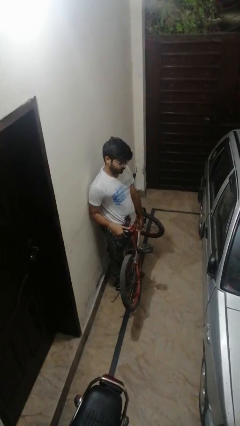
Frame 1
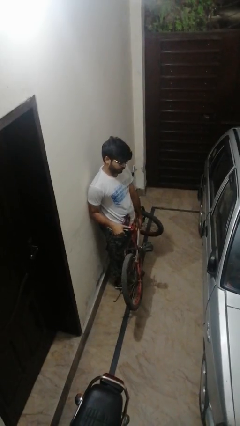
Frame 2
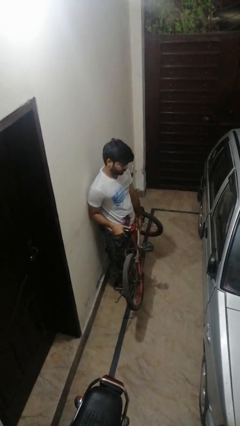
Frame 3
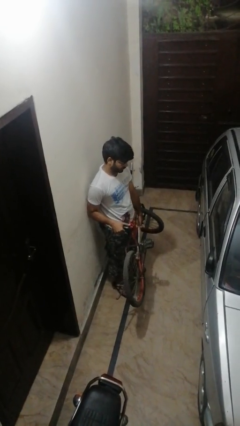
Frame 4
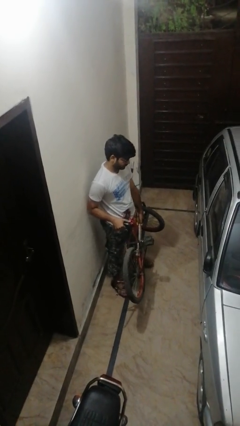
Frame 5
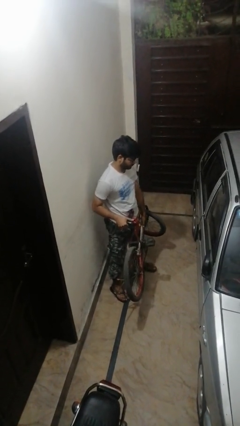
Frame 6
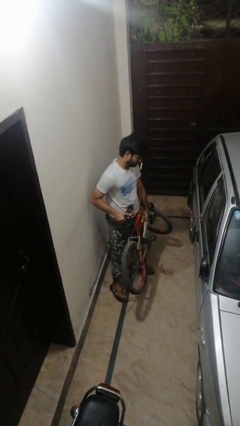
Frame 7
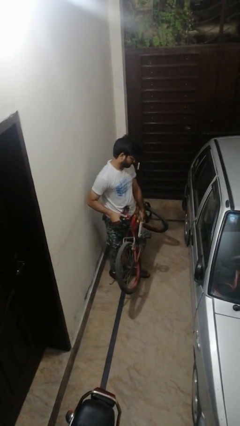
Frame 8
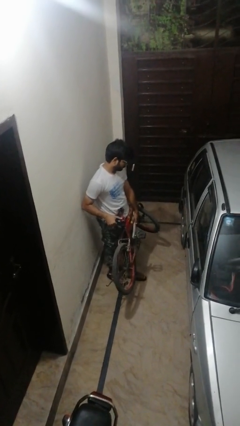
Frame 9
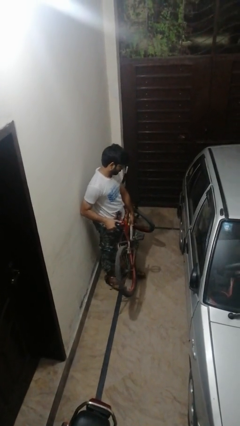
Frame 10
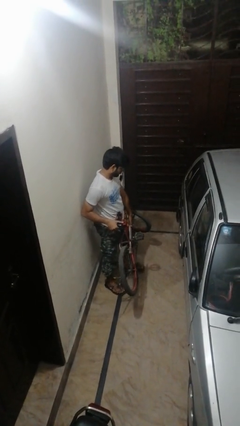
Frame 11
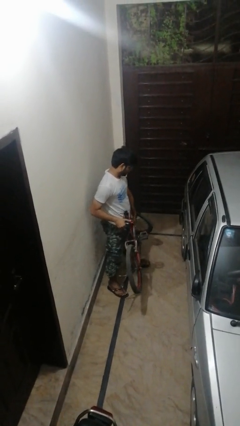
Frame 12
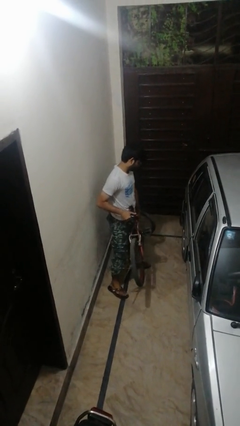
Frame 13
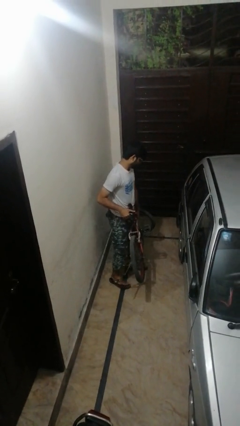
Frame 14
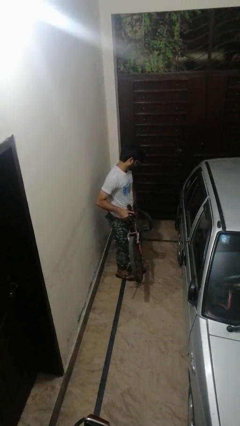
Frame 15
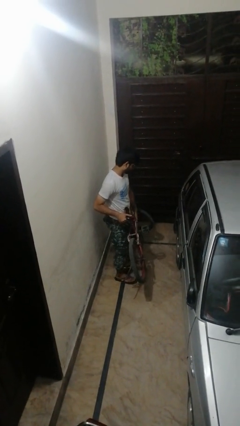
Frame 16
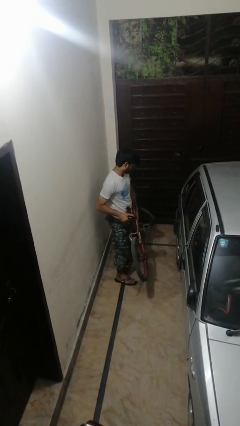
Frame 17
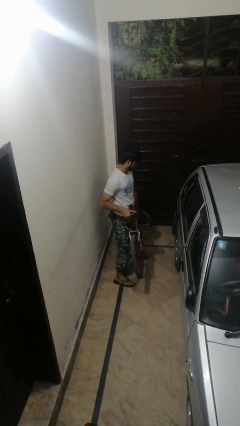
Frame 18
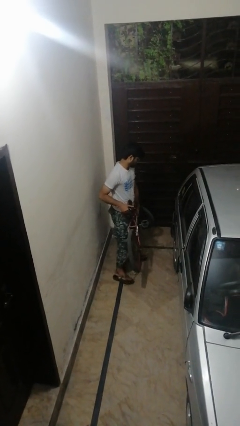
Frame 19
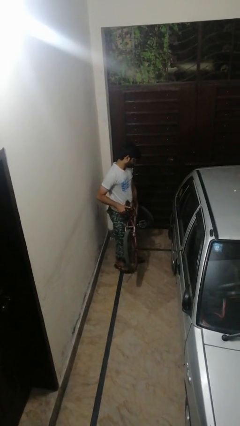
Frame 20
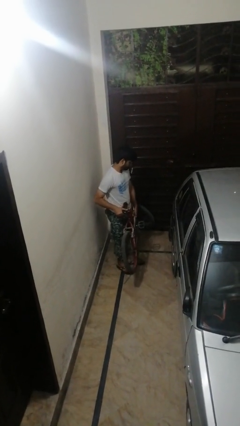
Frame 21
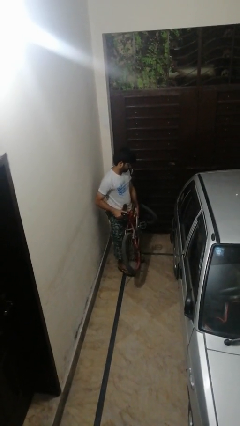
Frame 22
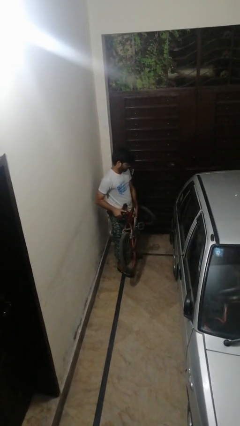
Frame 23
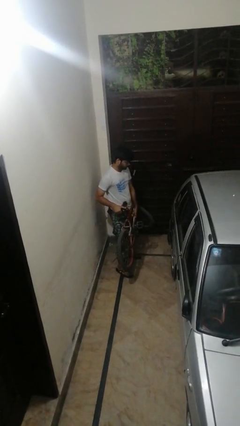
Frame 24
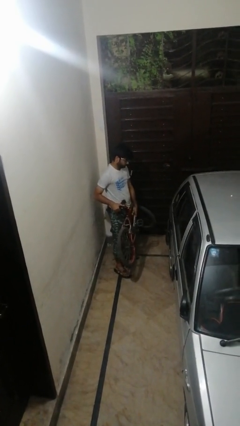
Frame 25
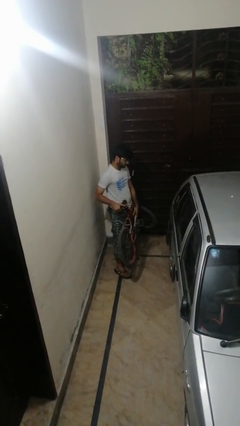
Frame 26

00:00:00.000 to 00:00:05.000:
person carries bicycle

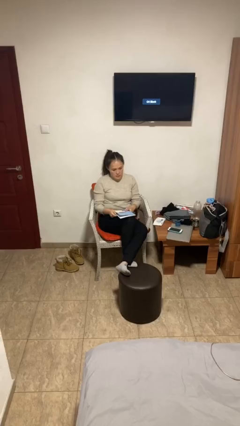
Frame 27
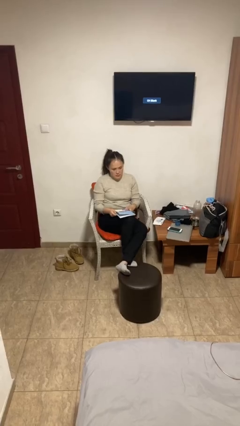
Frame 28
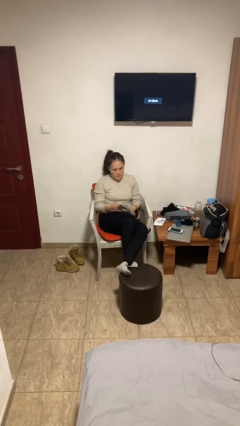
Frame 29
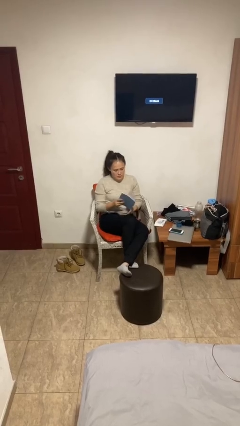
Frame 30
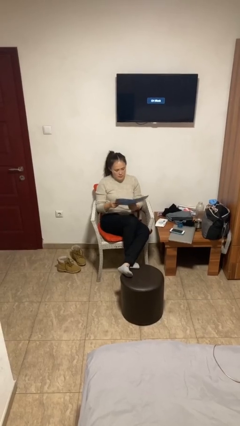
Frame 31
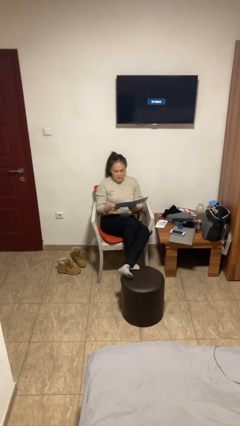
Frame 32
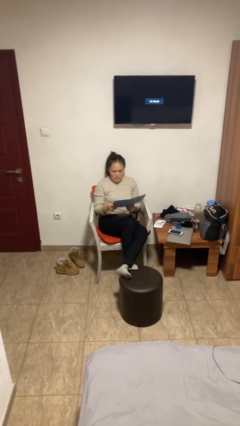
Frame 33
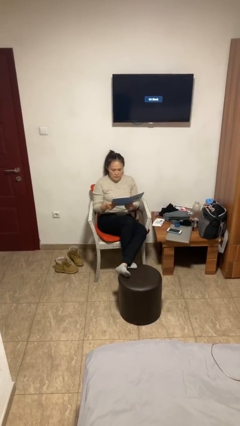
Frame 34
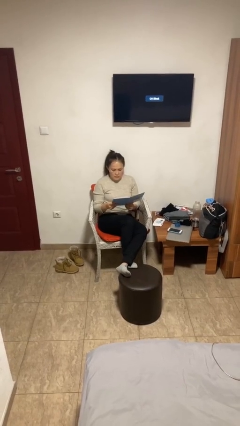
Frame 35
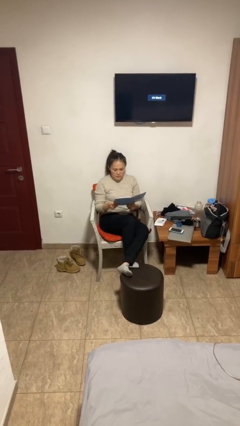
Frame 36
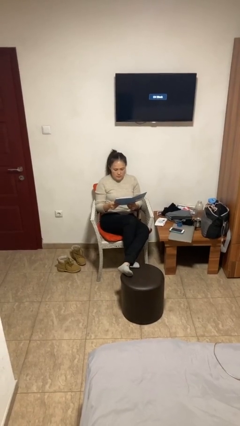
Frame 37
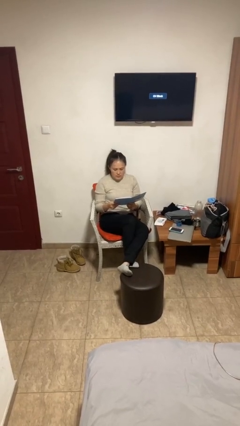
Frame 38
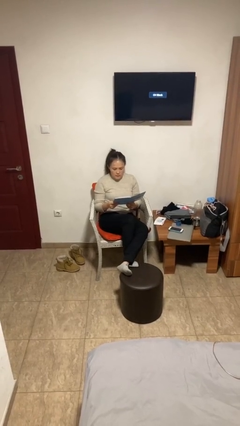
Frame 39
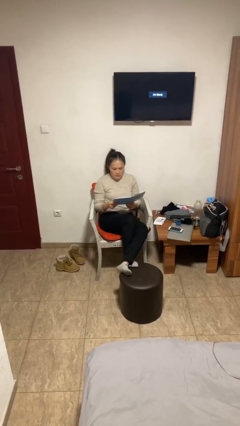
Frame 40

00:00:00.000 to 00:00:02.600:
person reads document

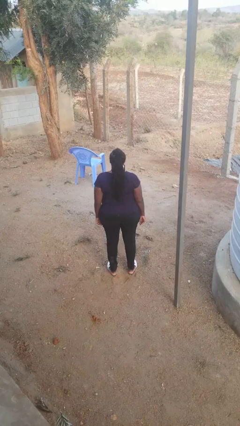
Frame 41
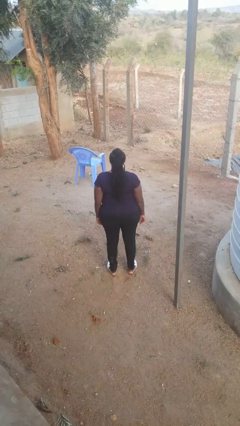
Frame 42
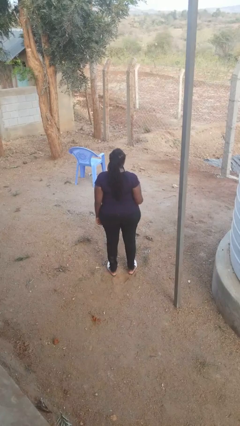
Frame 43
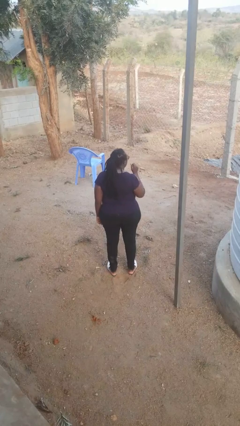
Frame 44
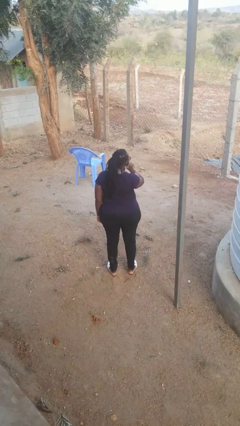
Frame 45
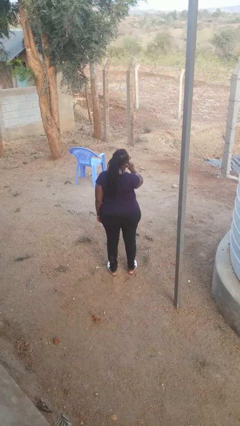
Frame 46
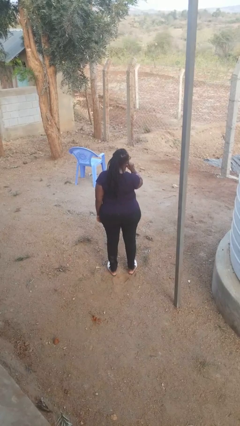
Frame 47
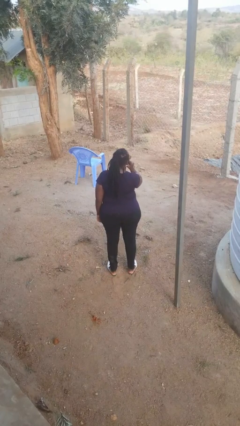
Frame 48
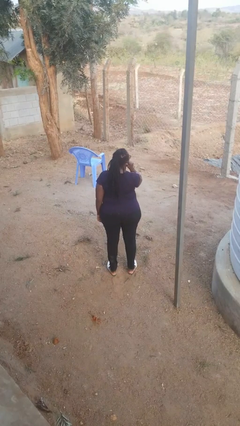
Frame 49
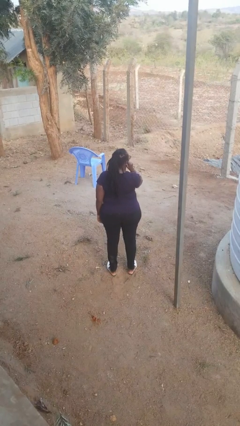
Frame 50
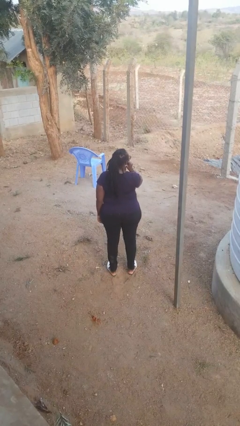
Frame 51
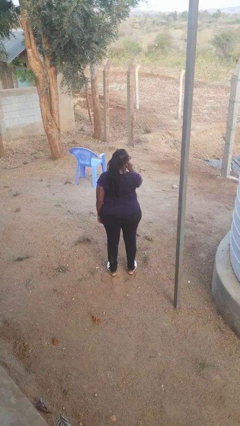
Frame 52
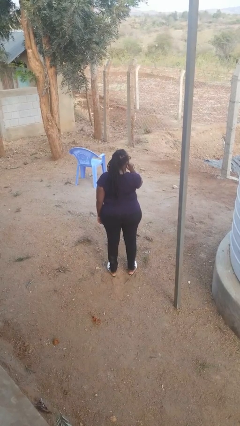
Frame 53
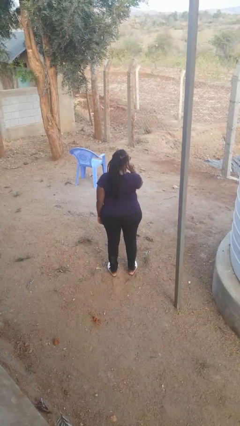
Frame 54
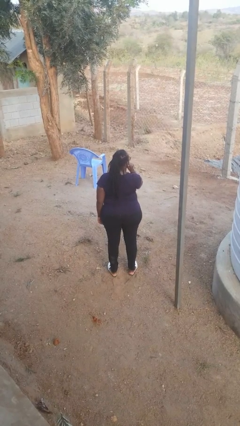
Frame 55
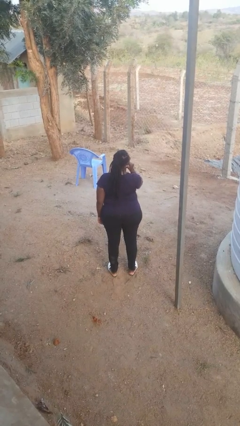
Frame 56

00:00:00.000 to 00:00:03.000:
person touches earlobe

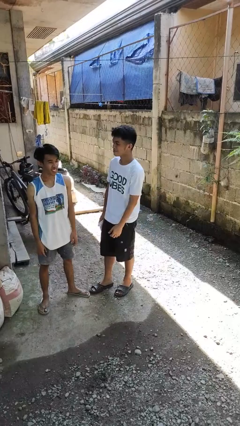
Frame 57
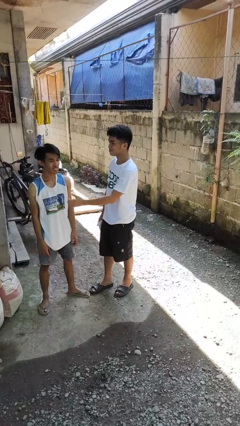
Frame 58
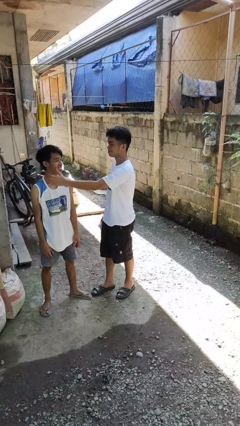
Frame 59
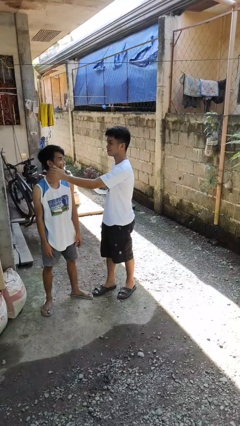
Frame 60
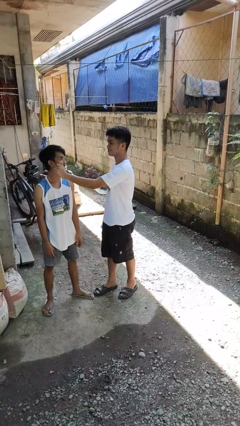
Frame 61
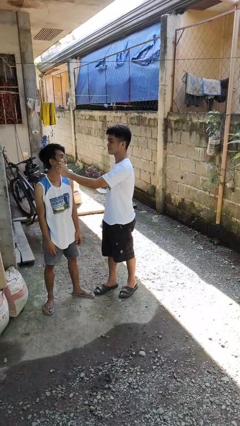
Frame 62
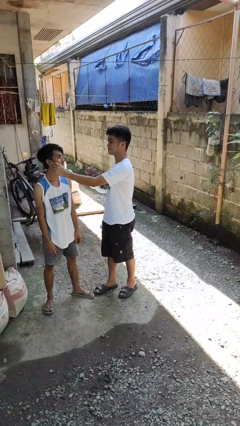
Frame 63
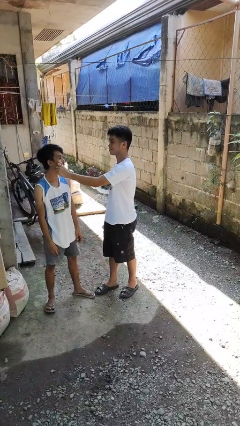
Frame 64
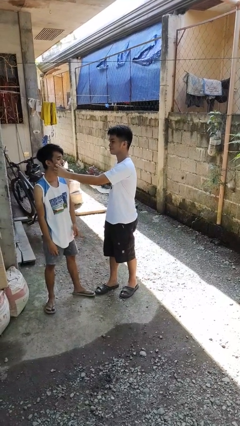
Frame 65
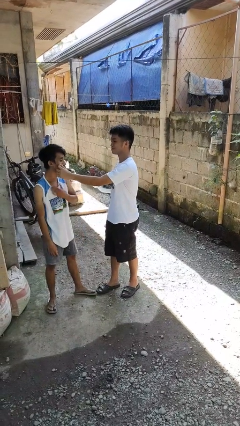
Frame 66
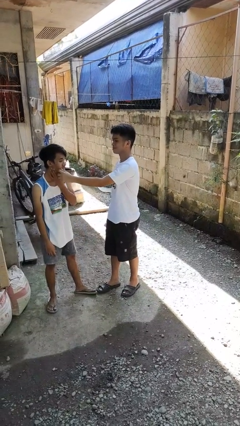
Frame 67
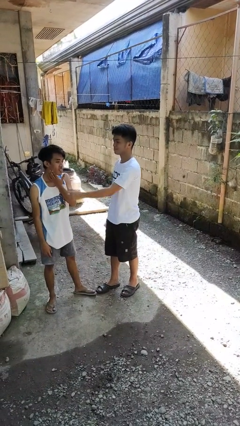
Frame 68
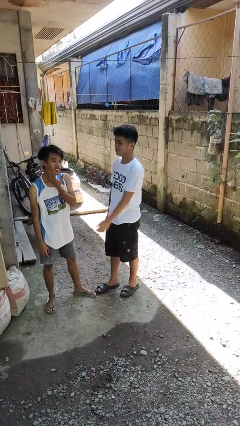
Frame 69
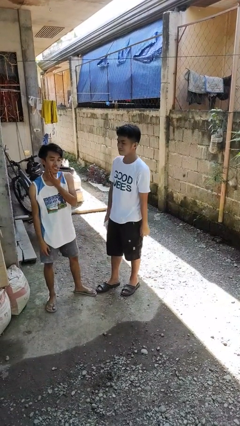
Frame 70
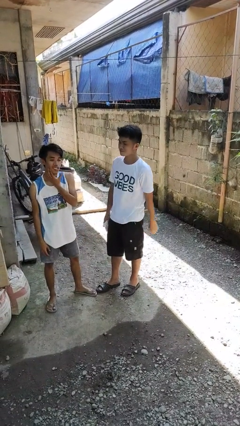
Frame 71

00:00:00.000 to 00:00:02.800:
person touches face of person

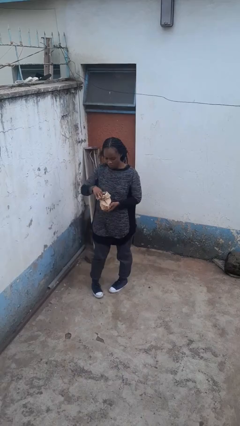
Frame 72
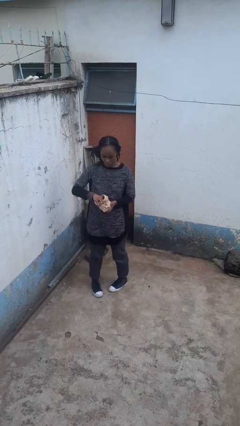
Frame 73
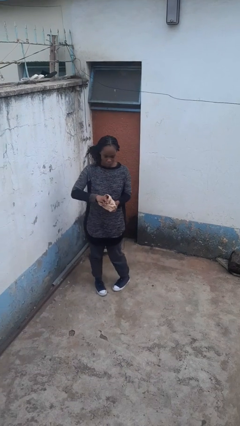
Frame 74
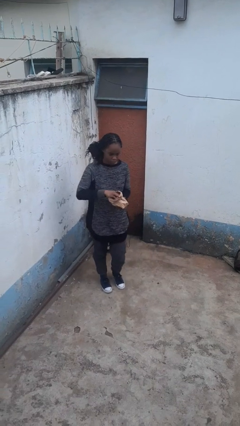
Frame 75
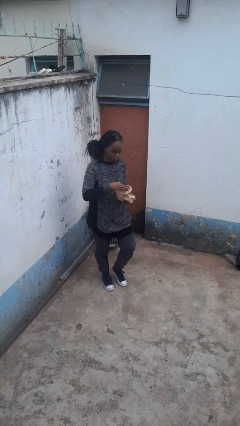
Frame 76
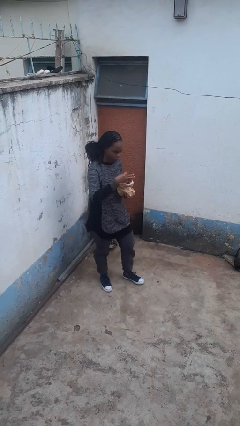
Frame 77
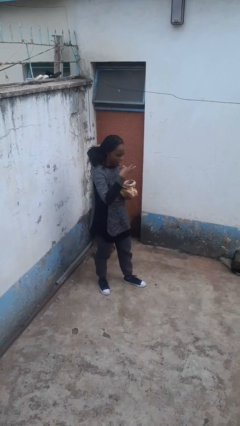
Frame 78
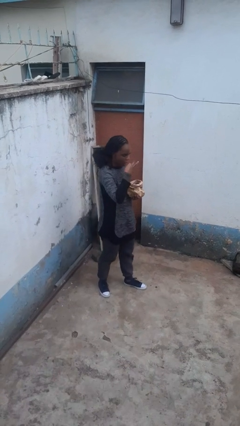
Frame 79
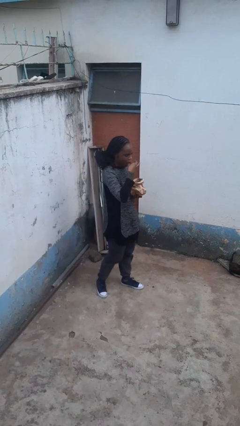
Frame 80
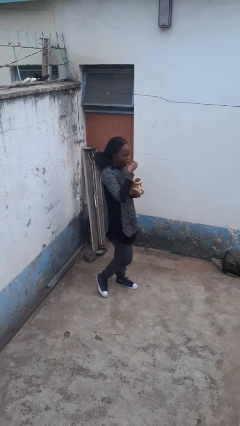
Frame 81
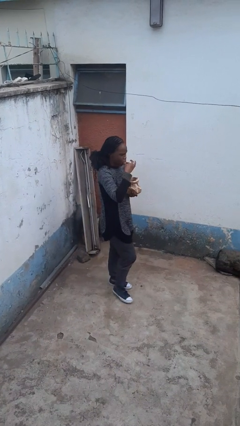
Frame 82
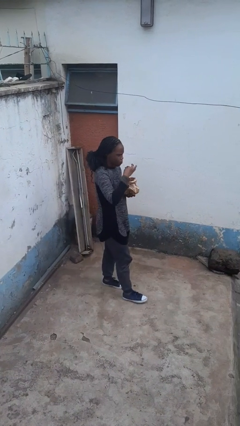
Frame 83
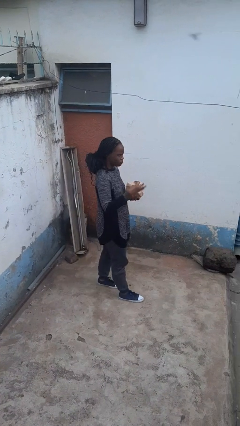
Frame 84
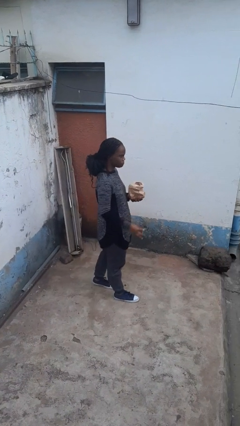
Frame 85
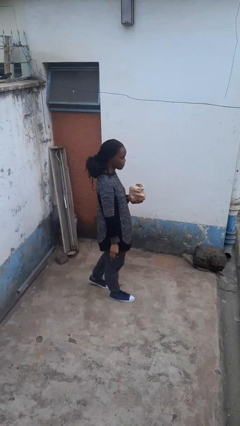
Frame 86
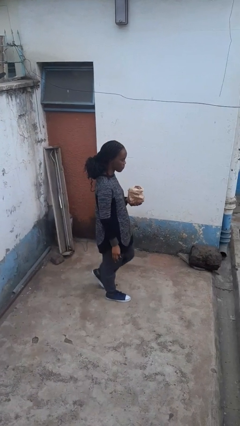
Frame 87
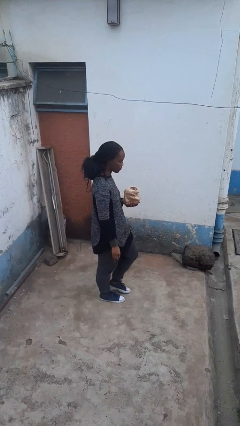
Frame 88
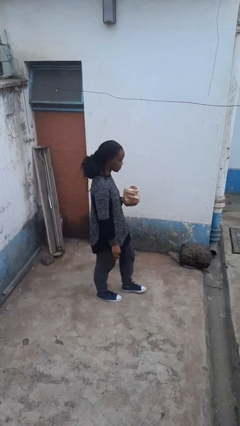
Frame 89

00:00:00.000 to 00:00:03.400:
person eats snack from bag

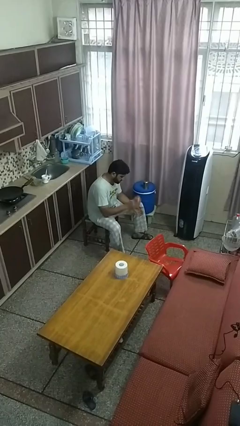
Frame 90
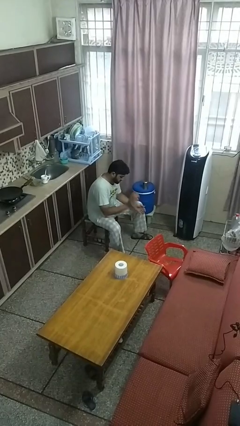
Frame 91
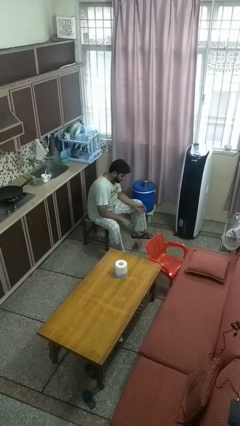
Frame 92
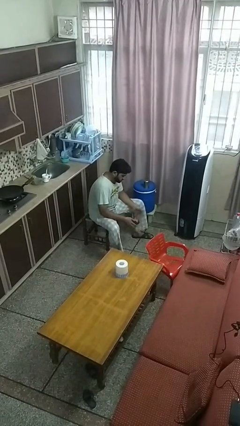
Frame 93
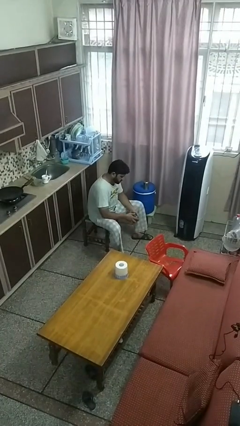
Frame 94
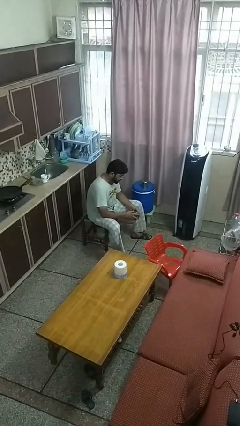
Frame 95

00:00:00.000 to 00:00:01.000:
person bounces ball on floor
